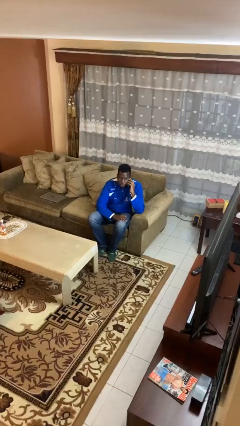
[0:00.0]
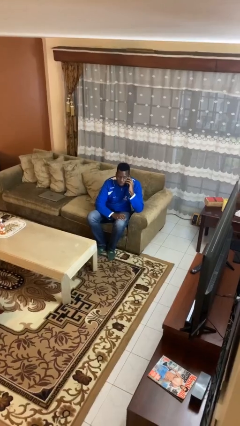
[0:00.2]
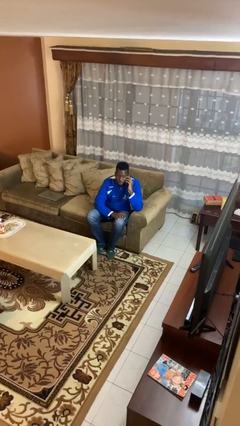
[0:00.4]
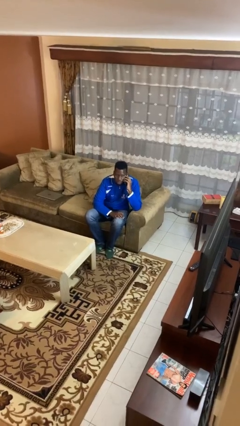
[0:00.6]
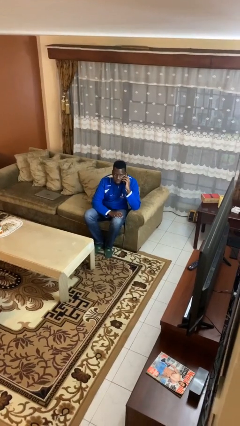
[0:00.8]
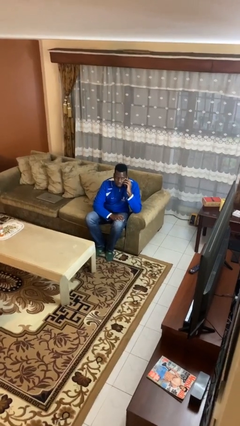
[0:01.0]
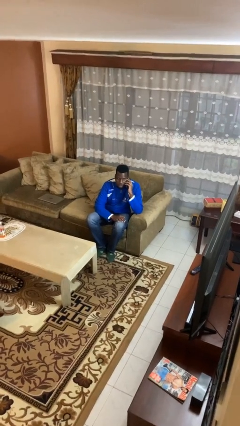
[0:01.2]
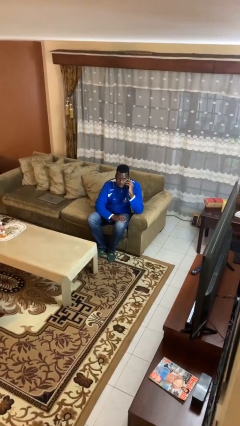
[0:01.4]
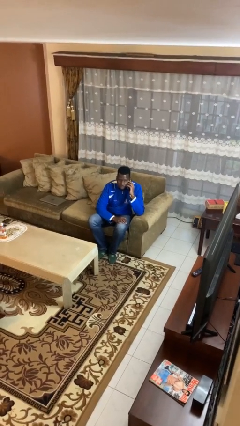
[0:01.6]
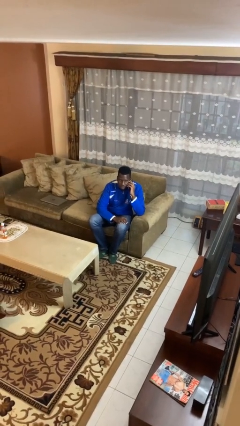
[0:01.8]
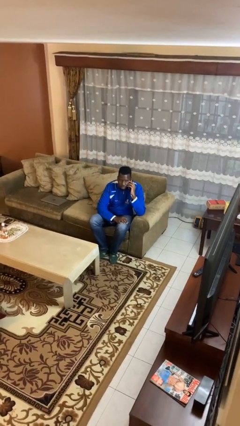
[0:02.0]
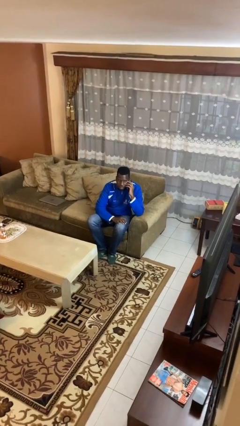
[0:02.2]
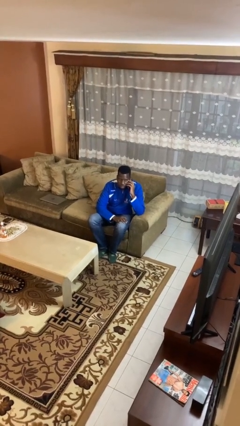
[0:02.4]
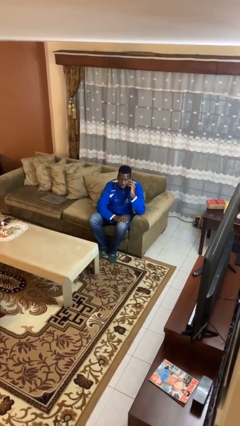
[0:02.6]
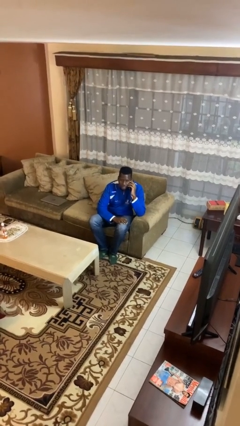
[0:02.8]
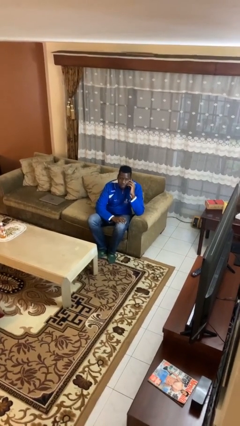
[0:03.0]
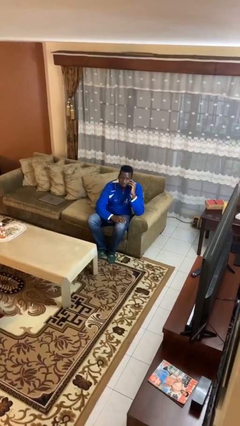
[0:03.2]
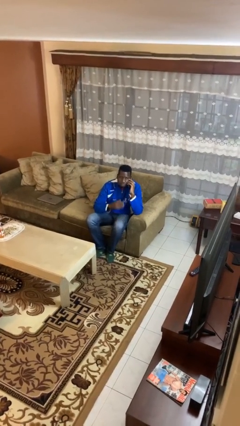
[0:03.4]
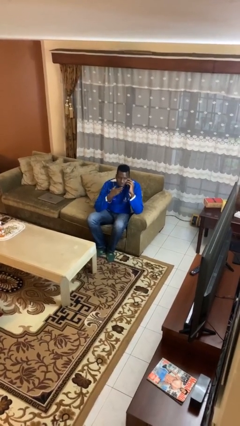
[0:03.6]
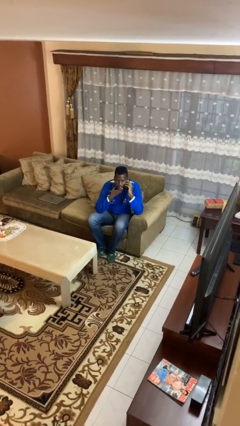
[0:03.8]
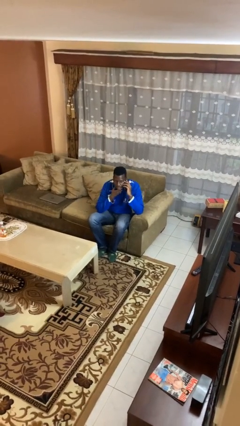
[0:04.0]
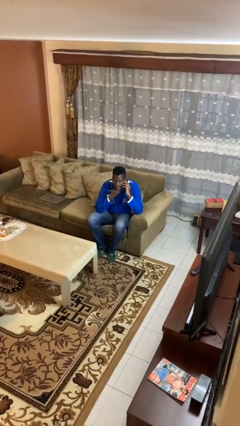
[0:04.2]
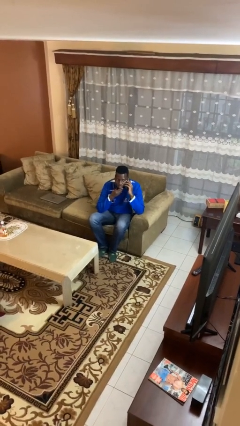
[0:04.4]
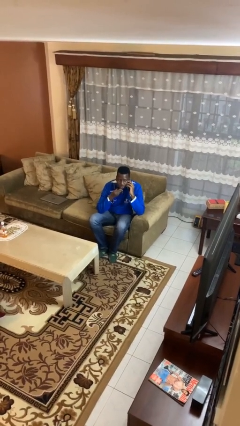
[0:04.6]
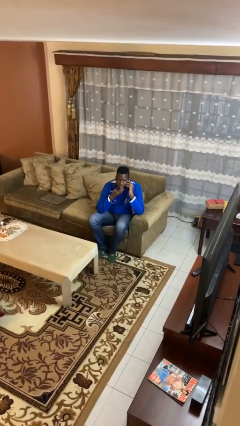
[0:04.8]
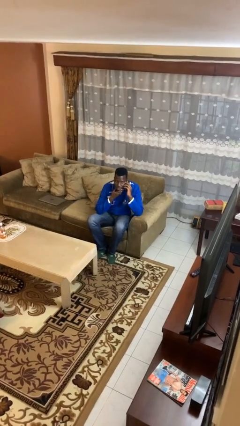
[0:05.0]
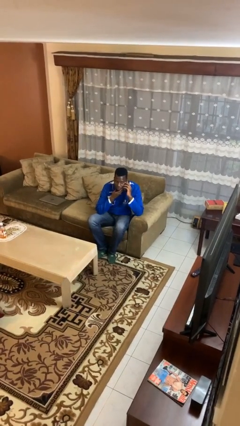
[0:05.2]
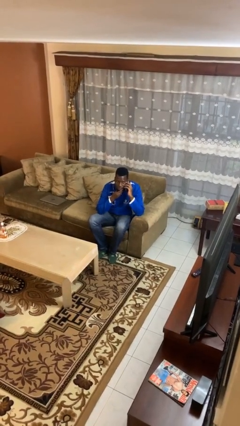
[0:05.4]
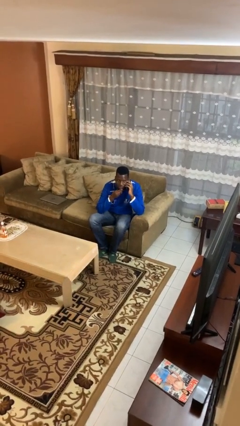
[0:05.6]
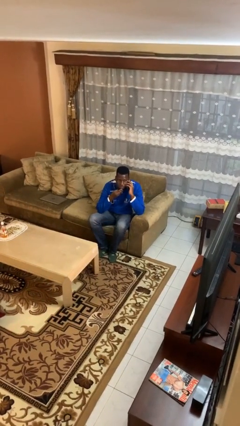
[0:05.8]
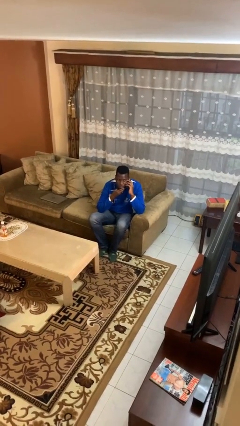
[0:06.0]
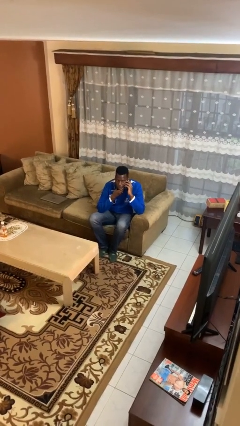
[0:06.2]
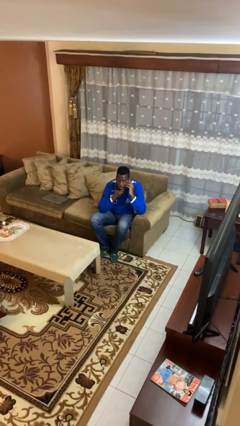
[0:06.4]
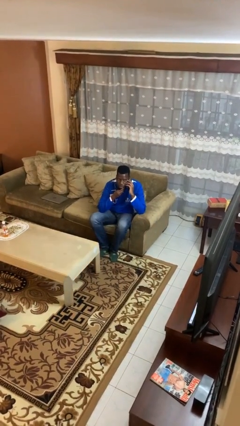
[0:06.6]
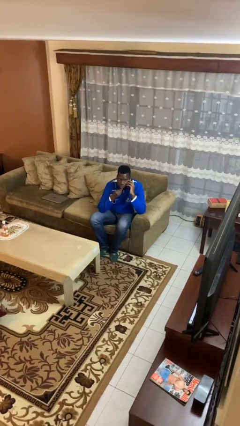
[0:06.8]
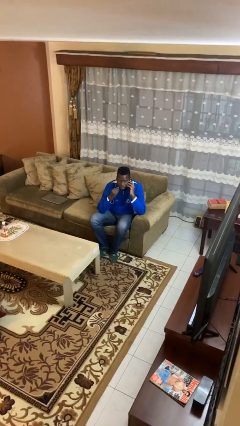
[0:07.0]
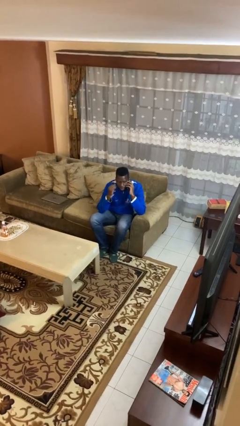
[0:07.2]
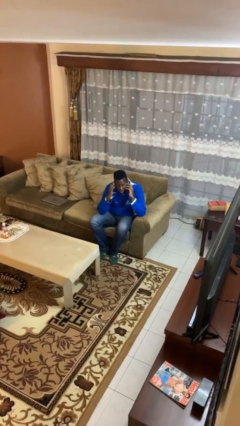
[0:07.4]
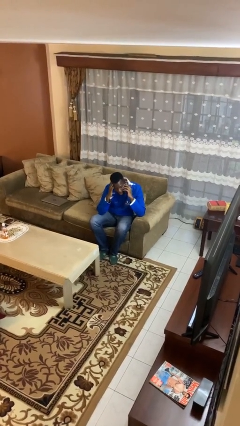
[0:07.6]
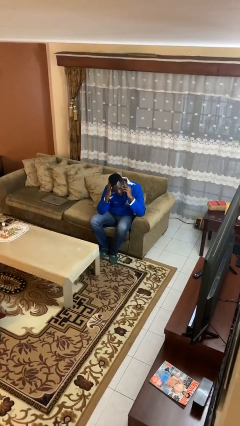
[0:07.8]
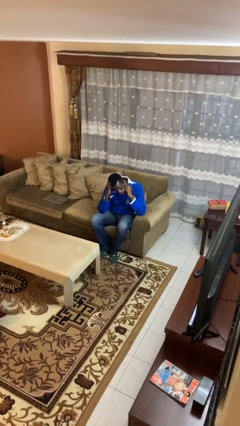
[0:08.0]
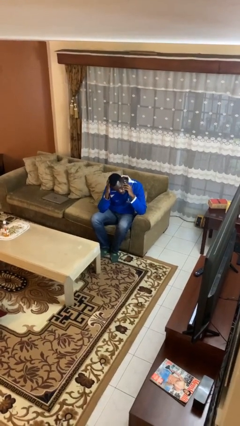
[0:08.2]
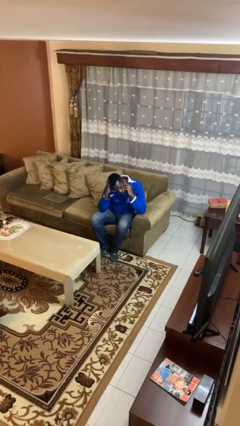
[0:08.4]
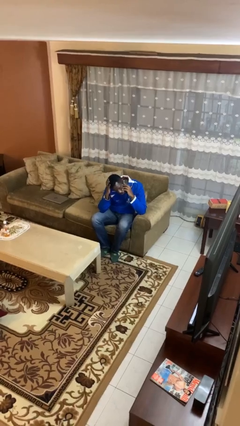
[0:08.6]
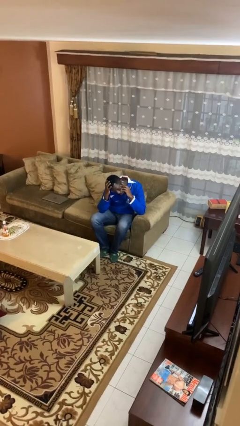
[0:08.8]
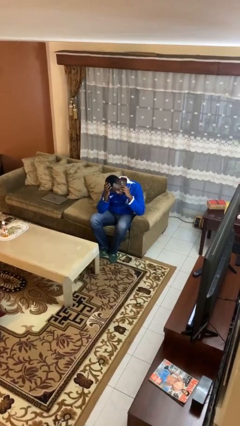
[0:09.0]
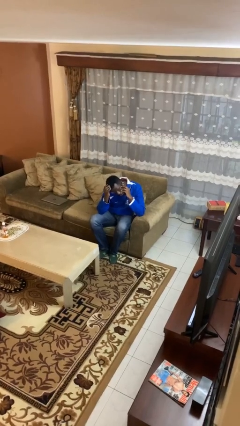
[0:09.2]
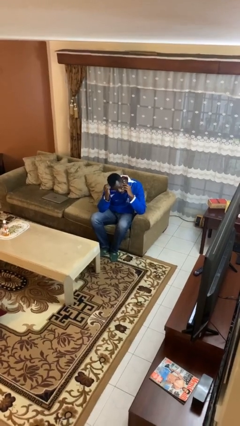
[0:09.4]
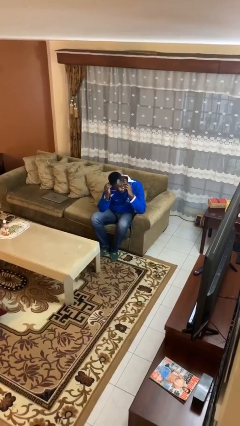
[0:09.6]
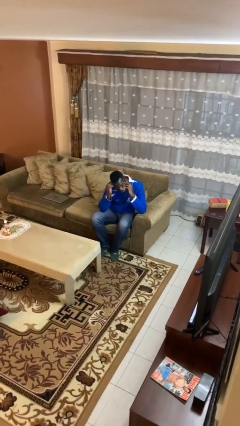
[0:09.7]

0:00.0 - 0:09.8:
person talks on phone

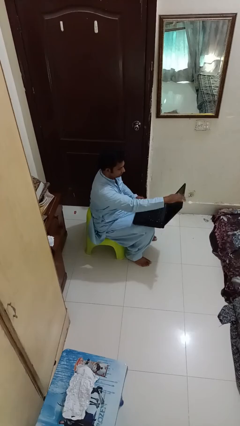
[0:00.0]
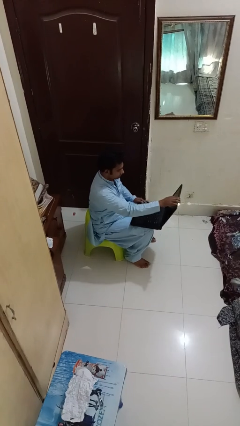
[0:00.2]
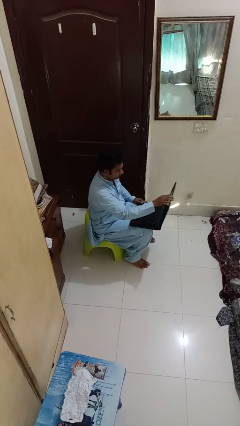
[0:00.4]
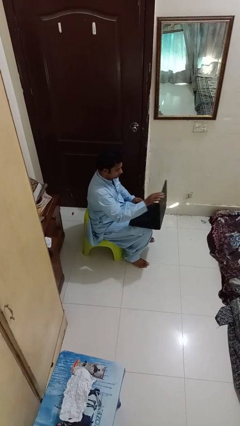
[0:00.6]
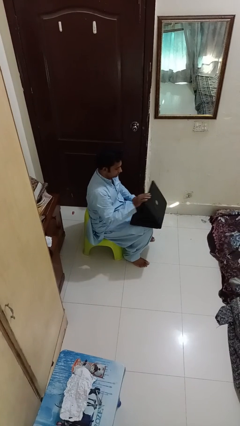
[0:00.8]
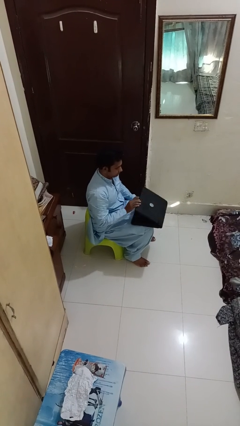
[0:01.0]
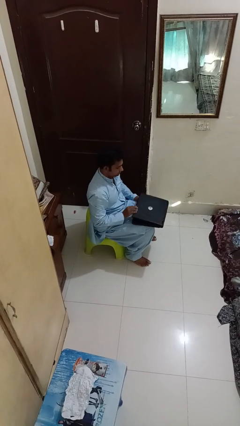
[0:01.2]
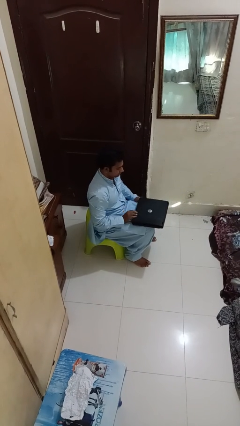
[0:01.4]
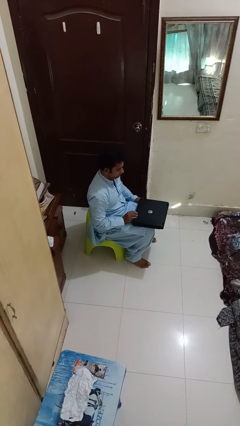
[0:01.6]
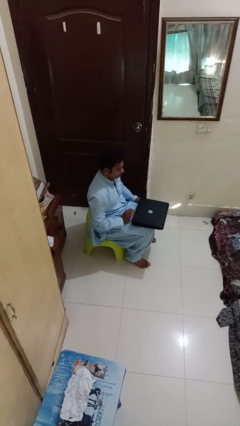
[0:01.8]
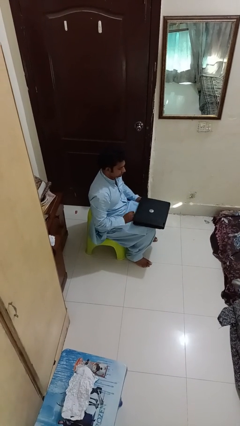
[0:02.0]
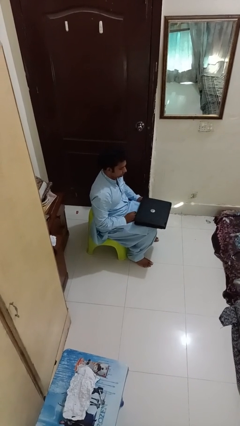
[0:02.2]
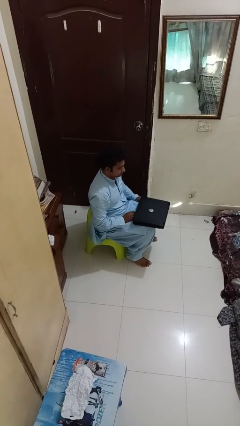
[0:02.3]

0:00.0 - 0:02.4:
person closes laptop

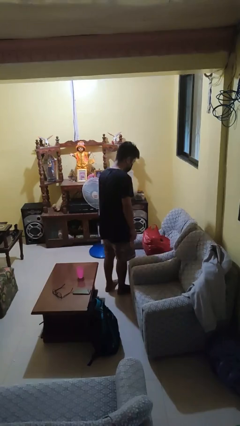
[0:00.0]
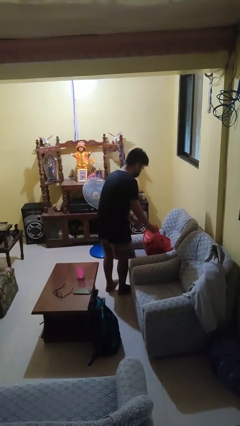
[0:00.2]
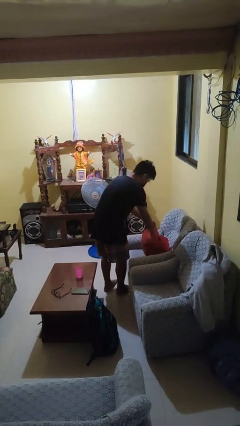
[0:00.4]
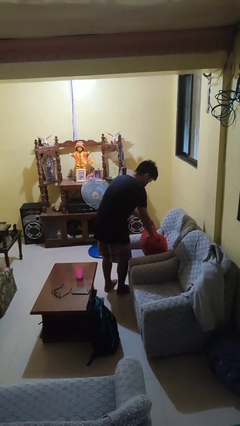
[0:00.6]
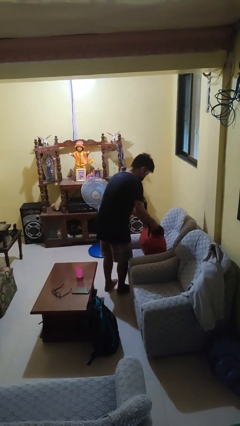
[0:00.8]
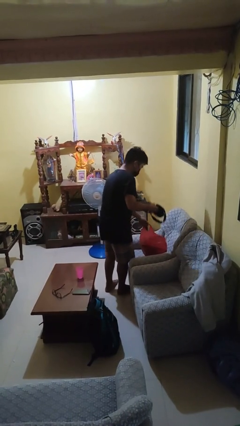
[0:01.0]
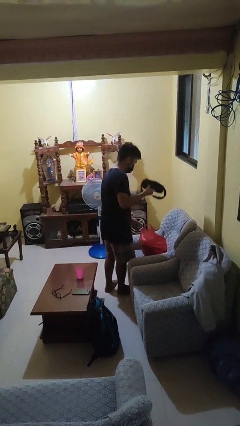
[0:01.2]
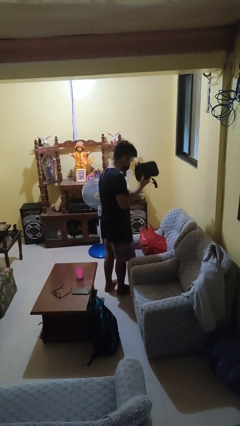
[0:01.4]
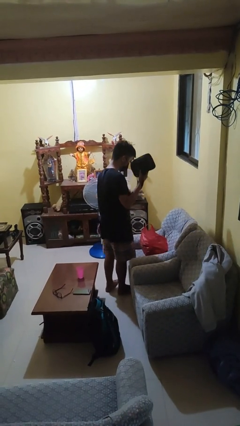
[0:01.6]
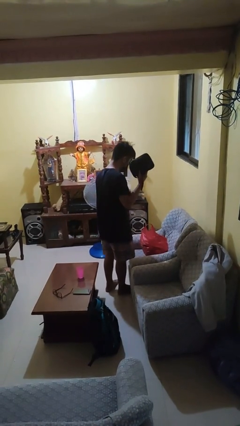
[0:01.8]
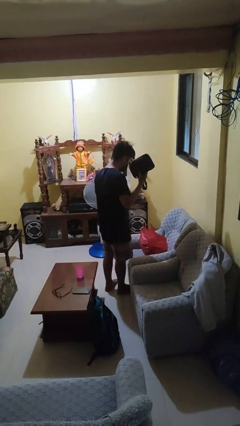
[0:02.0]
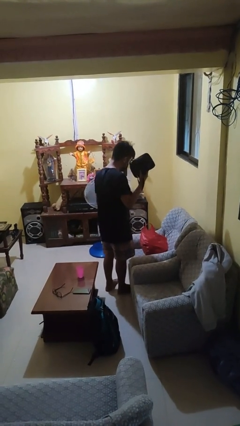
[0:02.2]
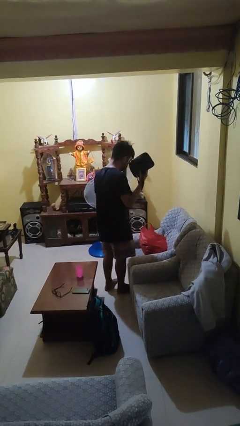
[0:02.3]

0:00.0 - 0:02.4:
person takes object from bag

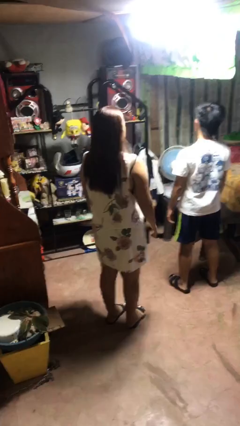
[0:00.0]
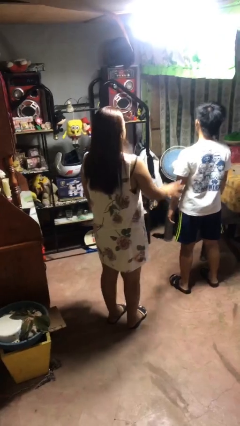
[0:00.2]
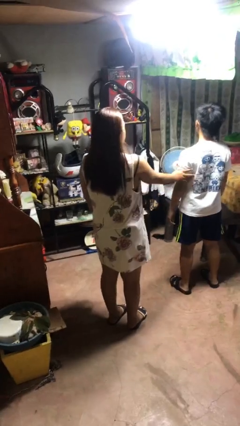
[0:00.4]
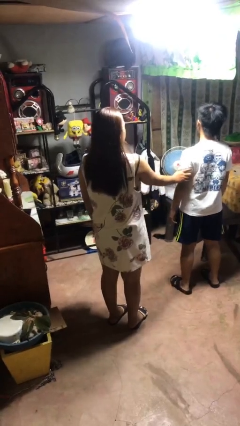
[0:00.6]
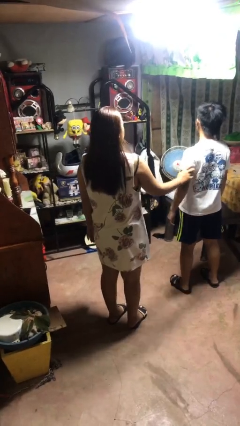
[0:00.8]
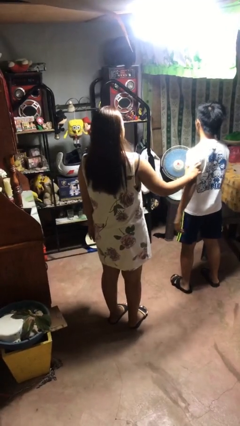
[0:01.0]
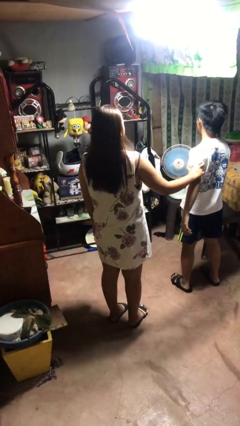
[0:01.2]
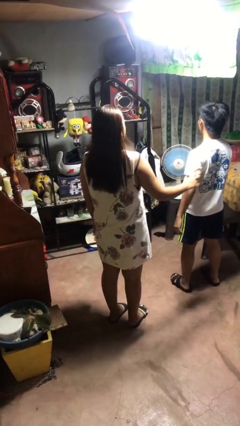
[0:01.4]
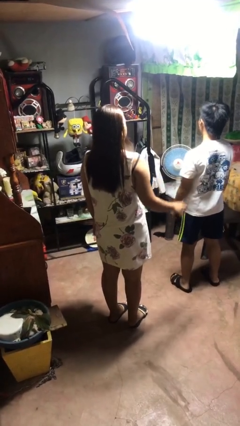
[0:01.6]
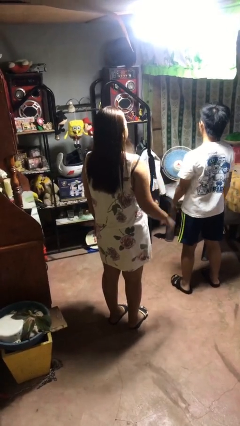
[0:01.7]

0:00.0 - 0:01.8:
person grabs person by bicep

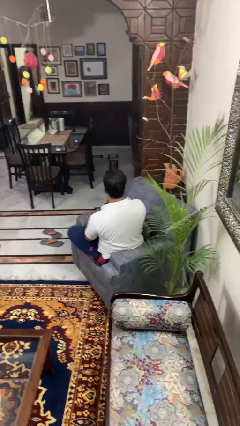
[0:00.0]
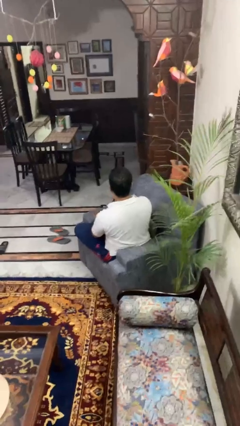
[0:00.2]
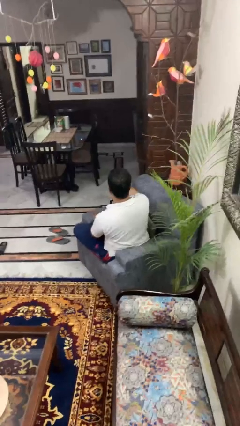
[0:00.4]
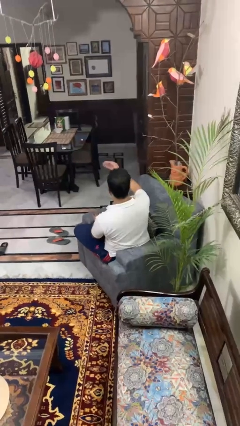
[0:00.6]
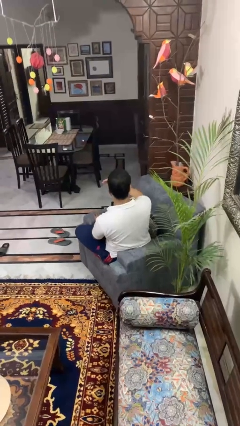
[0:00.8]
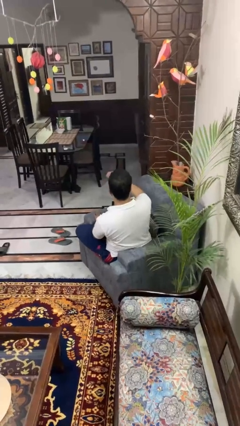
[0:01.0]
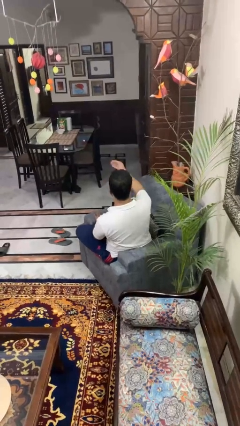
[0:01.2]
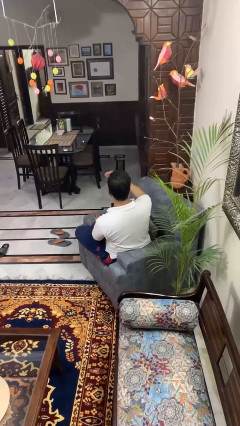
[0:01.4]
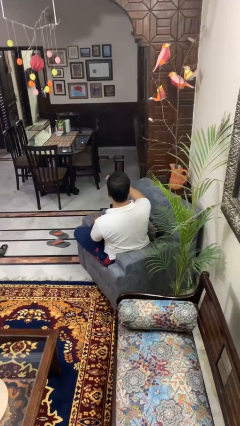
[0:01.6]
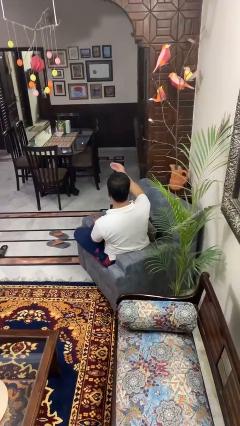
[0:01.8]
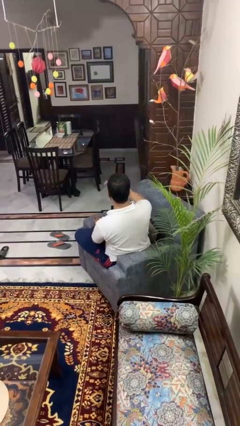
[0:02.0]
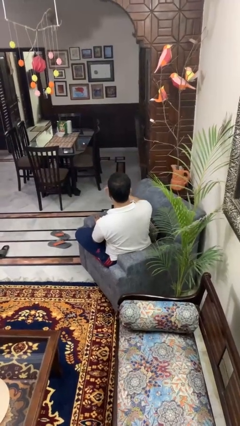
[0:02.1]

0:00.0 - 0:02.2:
person gestures come here
